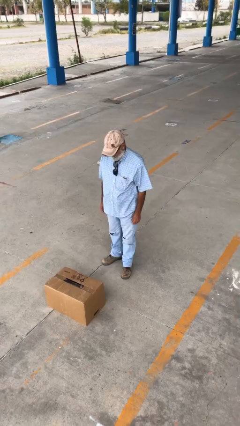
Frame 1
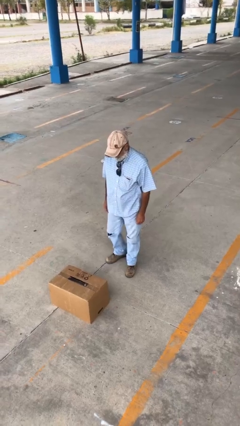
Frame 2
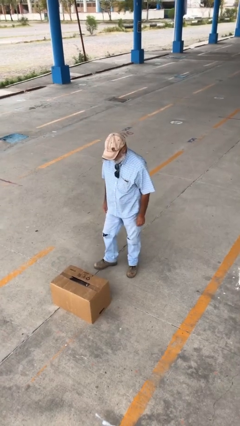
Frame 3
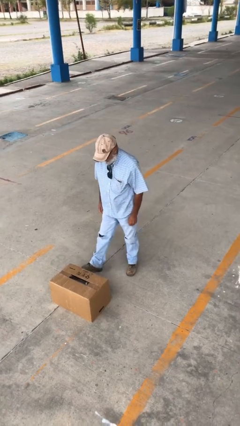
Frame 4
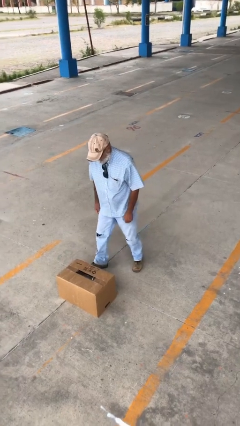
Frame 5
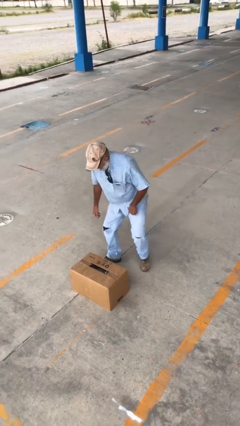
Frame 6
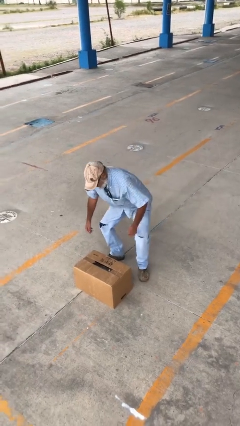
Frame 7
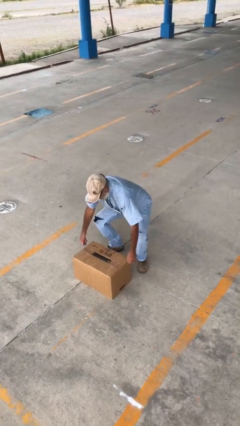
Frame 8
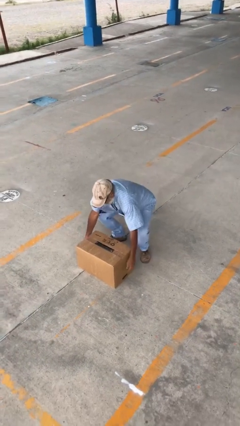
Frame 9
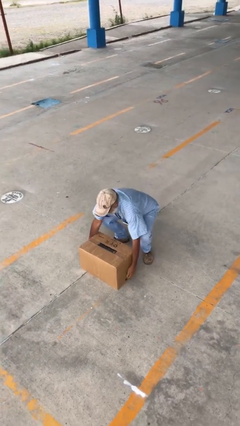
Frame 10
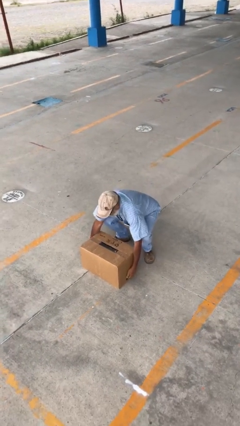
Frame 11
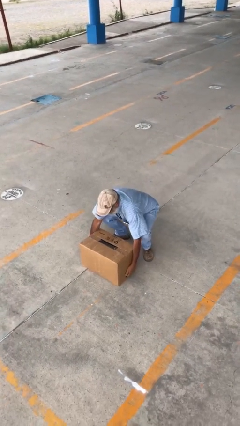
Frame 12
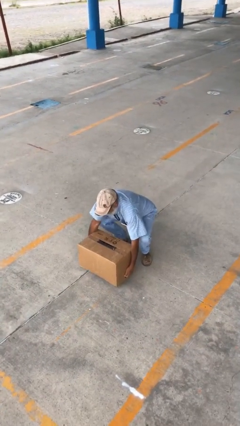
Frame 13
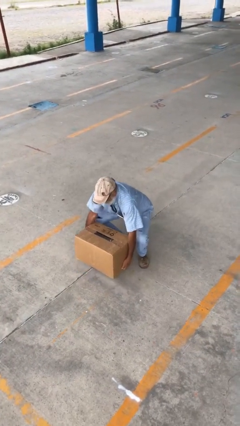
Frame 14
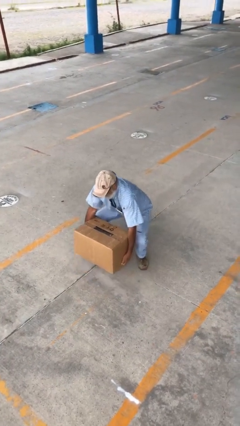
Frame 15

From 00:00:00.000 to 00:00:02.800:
person picks up object from floor

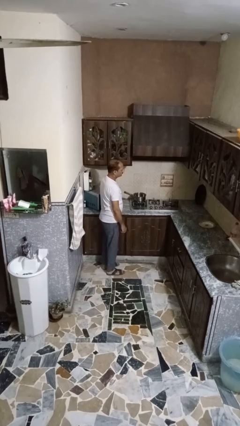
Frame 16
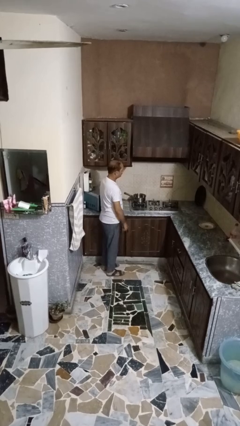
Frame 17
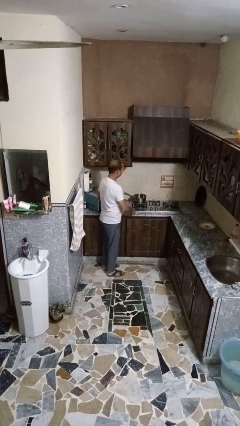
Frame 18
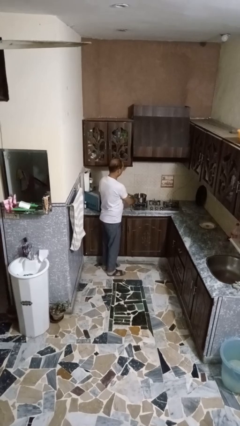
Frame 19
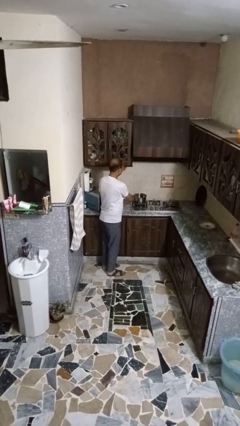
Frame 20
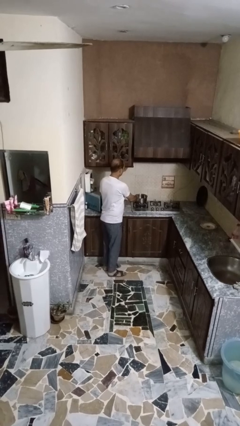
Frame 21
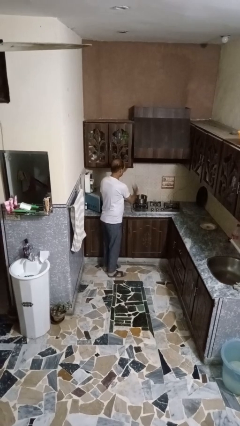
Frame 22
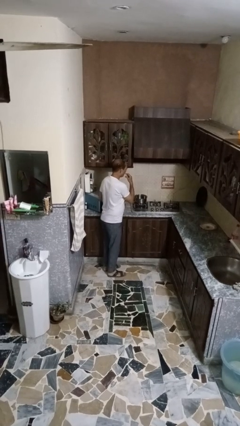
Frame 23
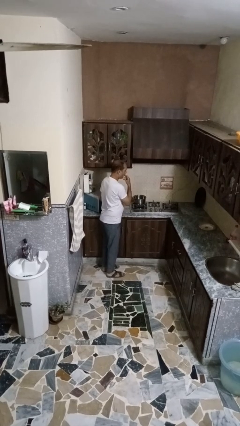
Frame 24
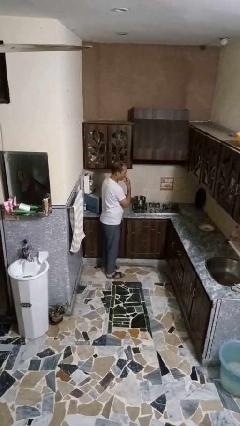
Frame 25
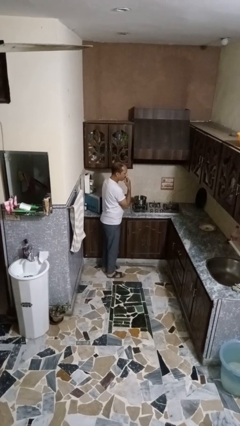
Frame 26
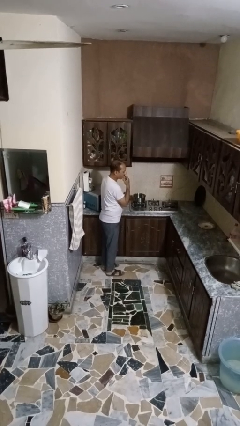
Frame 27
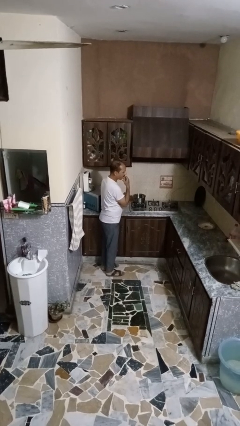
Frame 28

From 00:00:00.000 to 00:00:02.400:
person burns hand

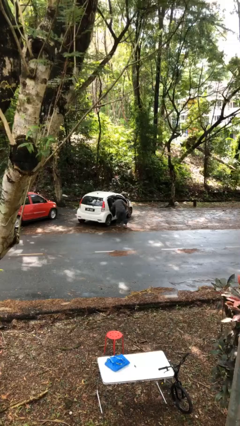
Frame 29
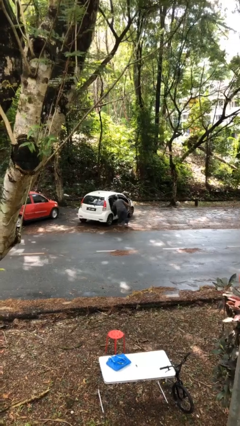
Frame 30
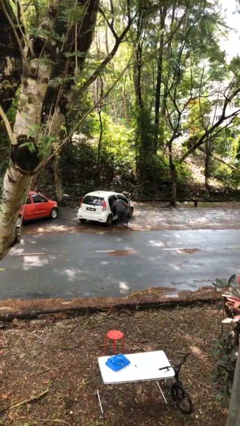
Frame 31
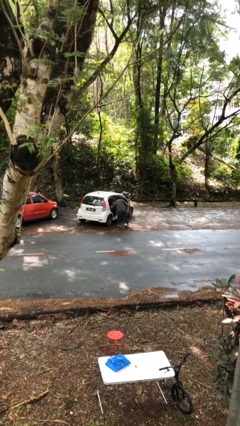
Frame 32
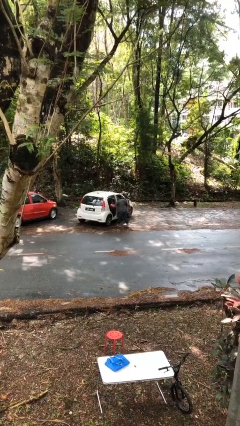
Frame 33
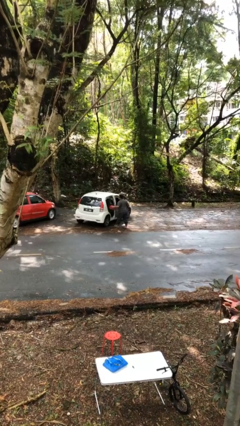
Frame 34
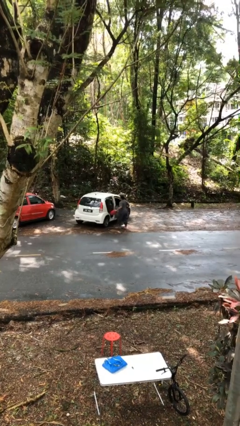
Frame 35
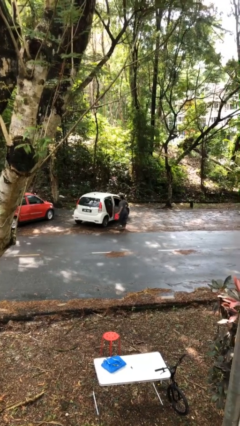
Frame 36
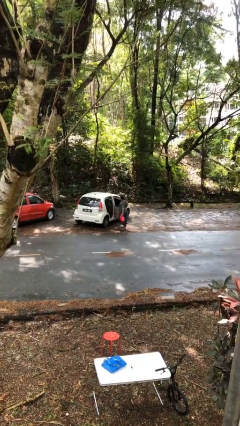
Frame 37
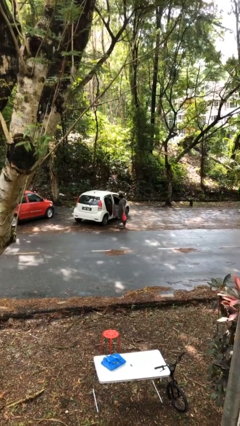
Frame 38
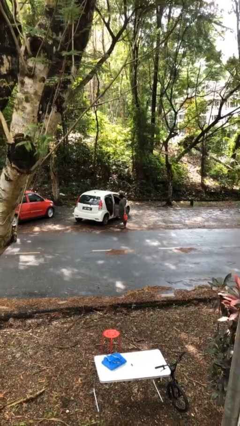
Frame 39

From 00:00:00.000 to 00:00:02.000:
person unloads car

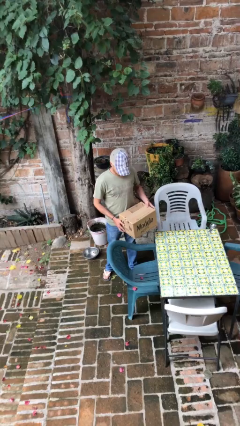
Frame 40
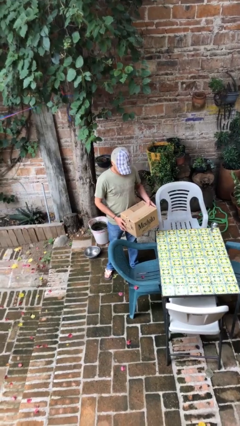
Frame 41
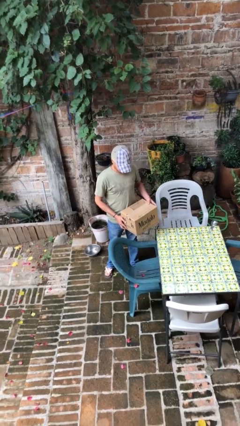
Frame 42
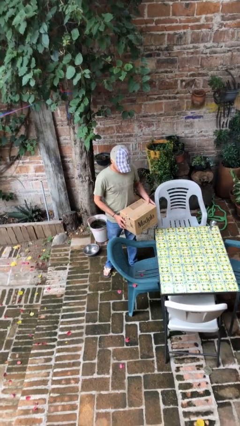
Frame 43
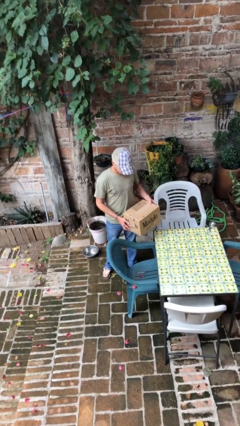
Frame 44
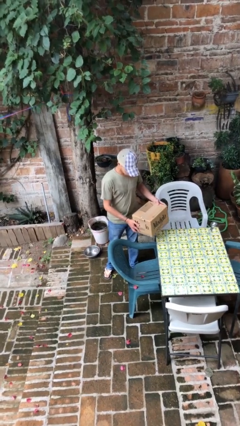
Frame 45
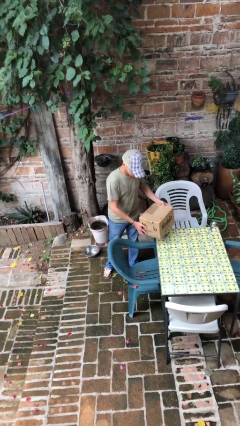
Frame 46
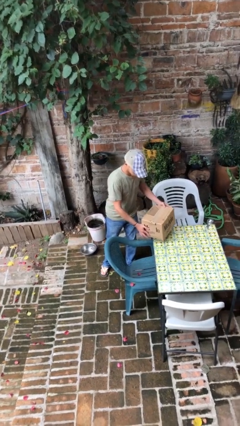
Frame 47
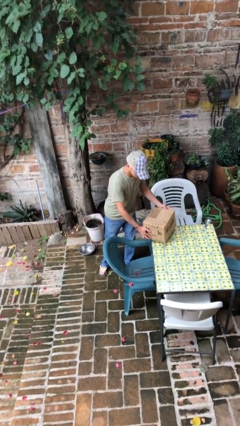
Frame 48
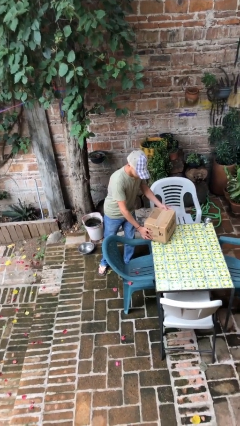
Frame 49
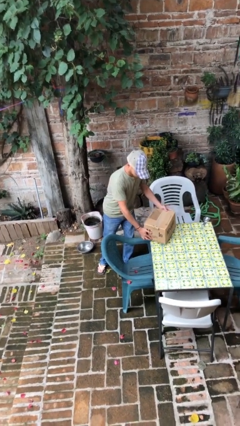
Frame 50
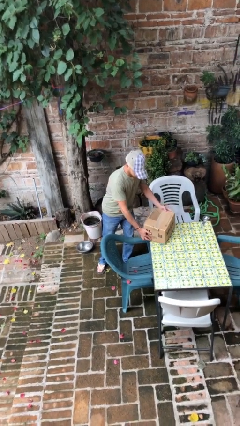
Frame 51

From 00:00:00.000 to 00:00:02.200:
person puts down object on table

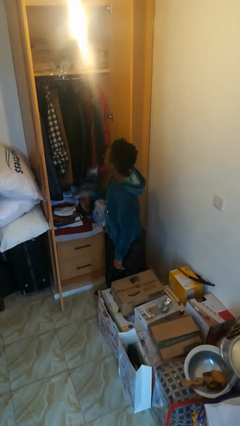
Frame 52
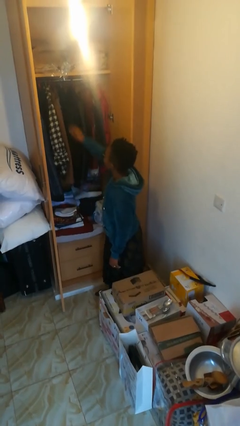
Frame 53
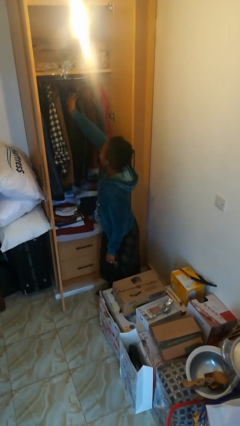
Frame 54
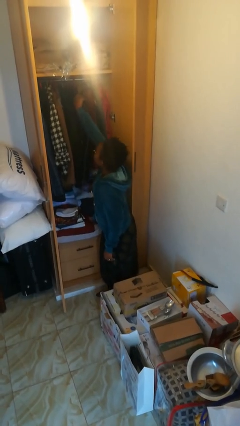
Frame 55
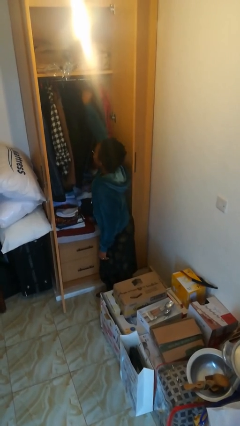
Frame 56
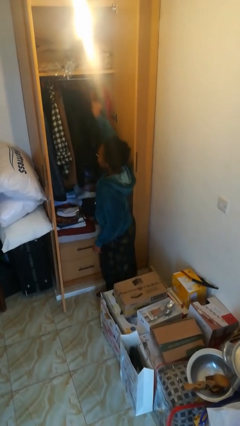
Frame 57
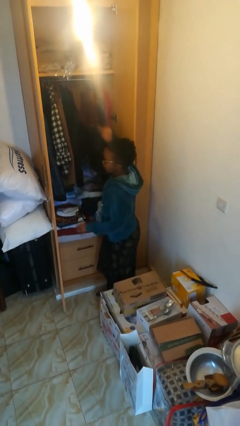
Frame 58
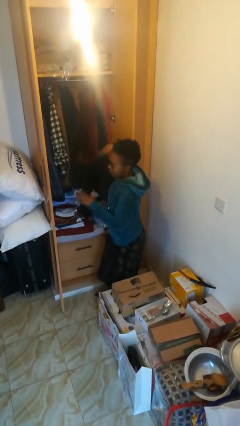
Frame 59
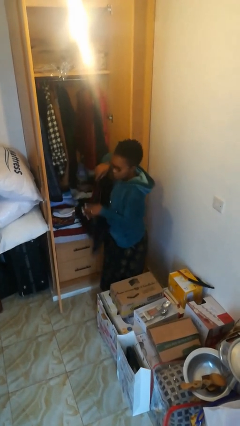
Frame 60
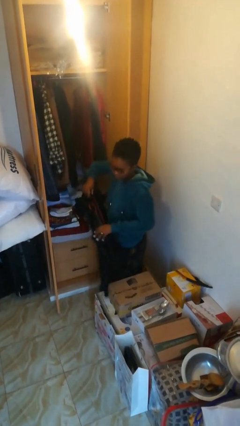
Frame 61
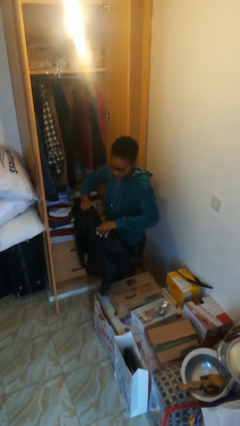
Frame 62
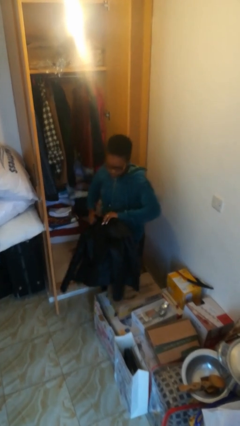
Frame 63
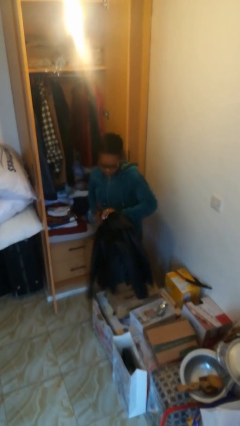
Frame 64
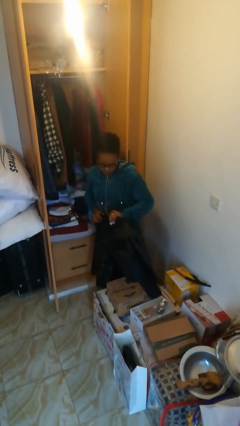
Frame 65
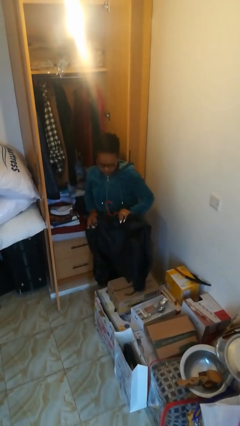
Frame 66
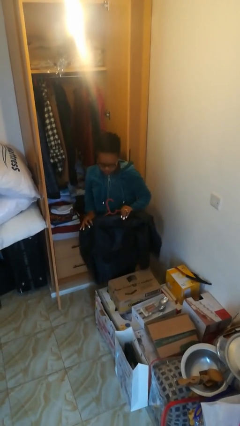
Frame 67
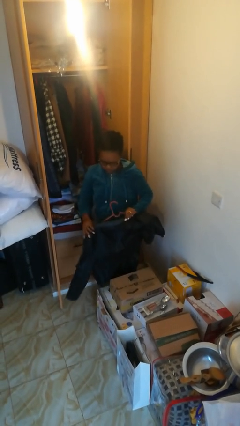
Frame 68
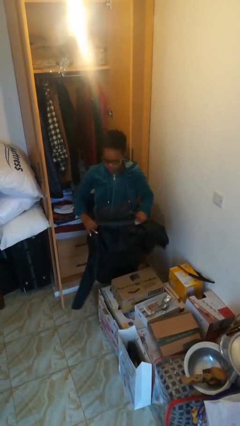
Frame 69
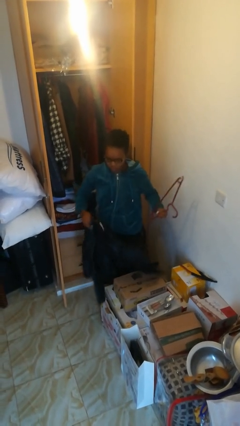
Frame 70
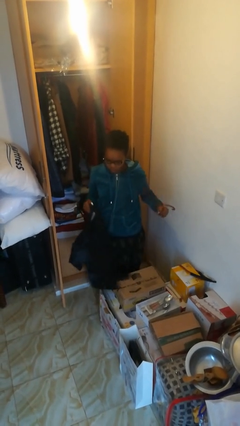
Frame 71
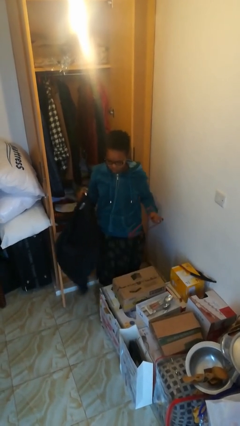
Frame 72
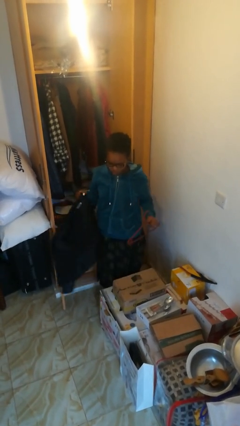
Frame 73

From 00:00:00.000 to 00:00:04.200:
person takes clothes from closet

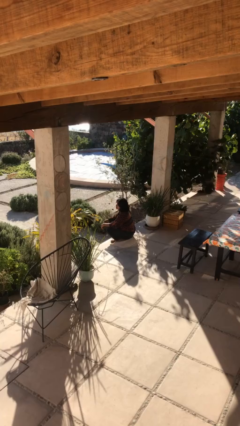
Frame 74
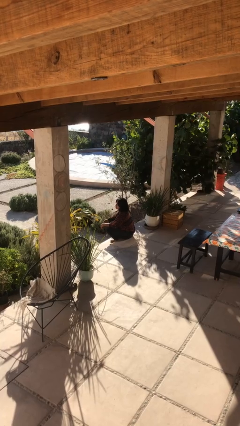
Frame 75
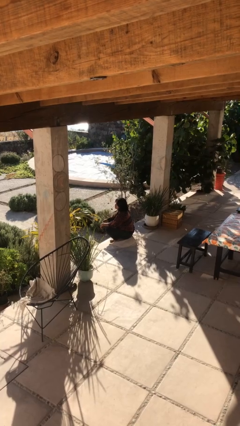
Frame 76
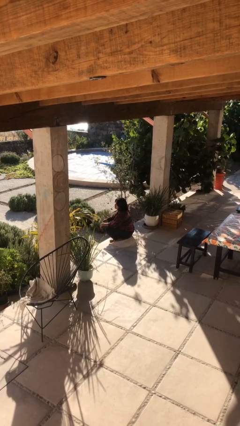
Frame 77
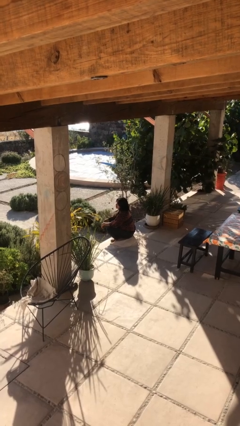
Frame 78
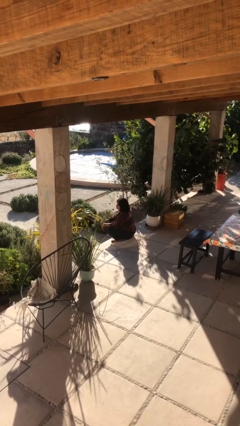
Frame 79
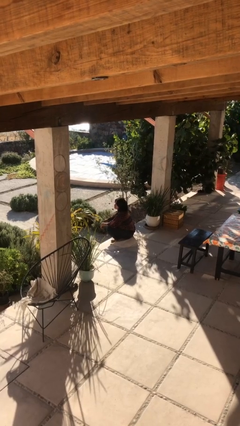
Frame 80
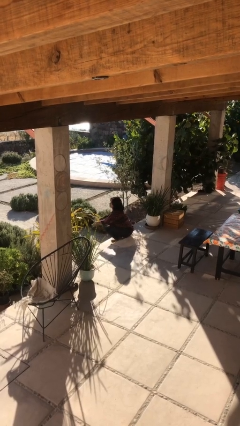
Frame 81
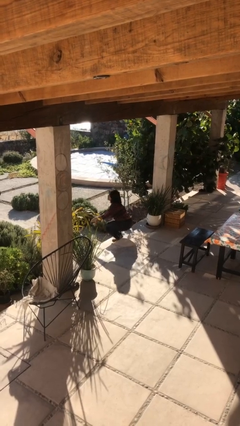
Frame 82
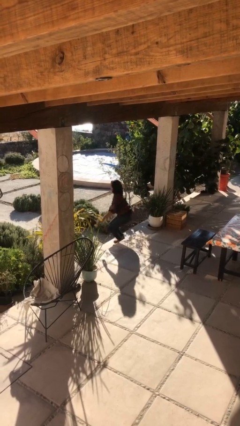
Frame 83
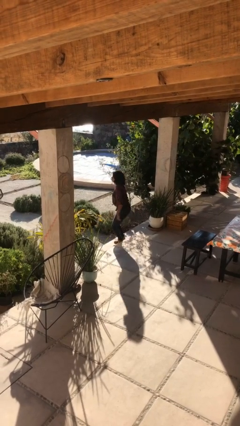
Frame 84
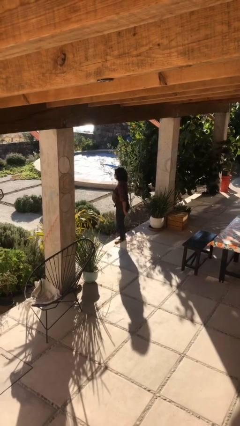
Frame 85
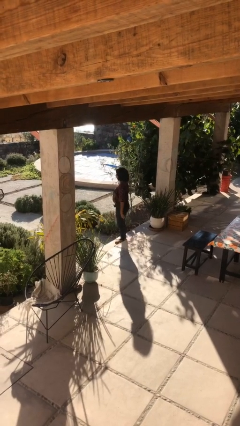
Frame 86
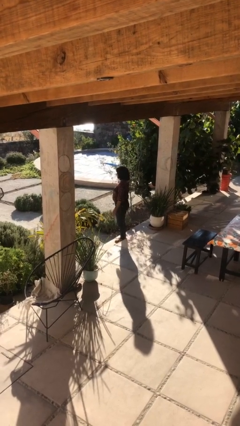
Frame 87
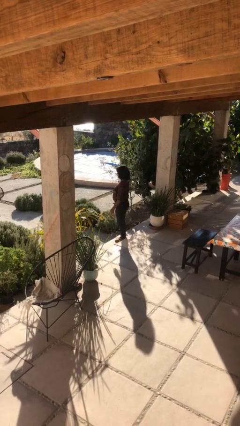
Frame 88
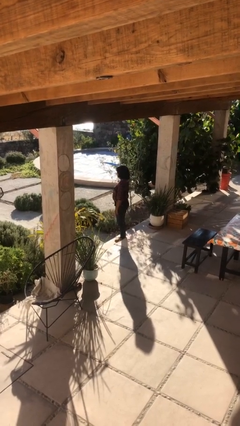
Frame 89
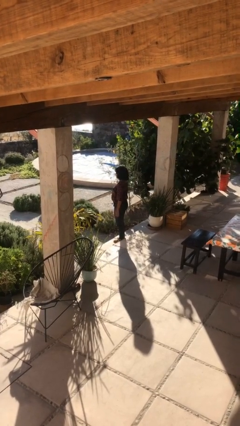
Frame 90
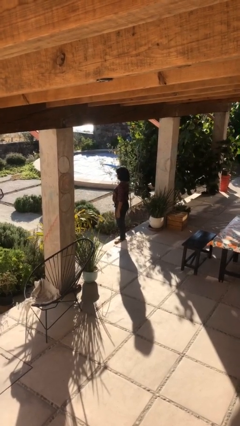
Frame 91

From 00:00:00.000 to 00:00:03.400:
person stands up

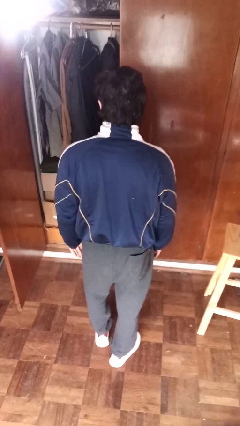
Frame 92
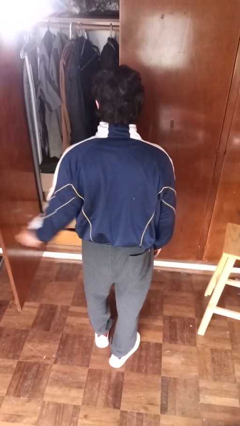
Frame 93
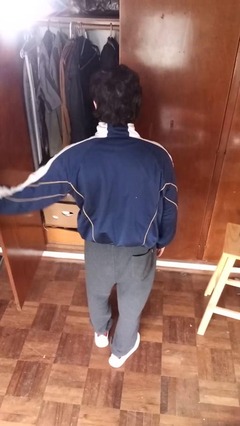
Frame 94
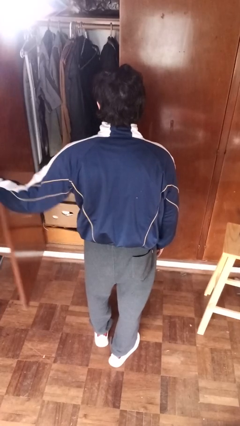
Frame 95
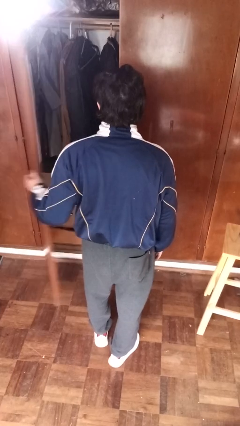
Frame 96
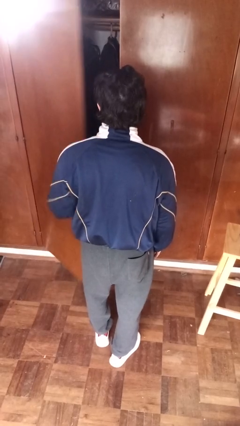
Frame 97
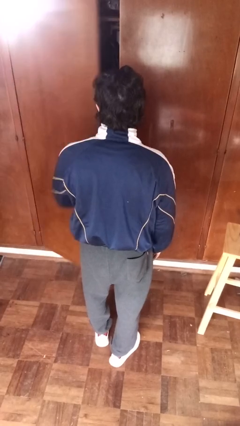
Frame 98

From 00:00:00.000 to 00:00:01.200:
person closes closet door
